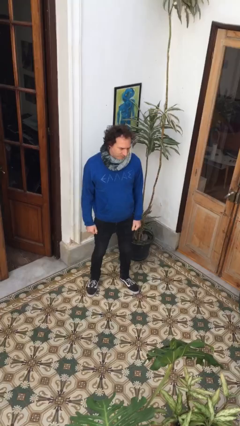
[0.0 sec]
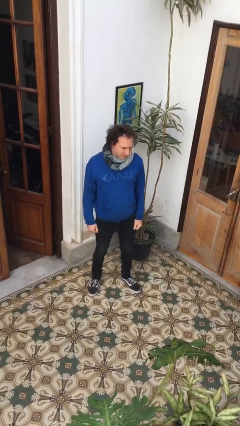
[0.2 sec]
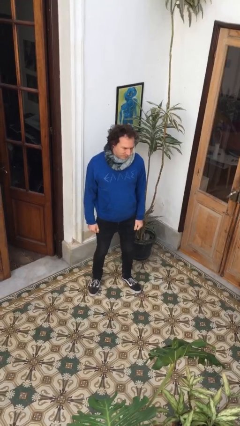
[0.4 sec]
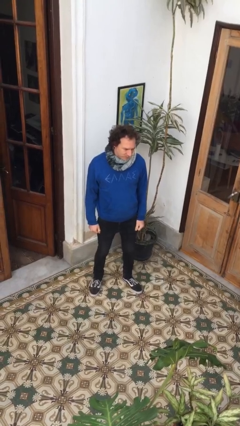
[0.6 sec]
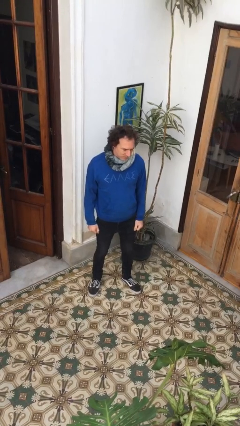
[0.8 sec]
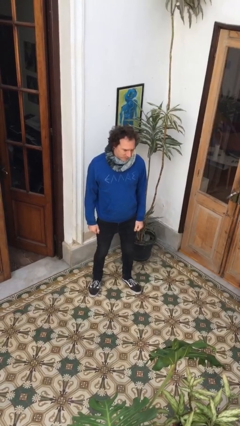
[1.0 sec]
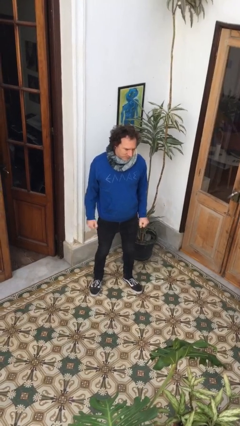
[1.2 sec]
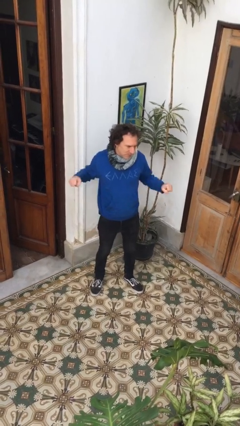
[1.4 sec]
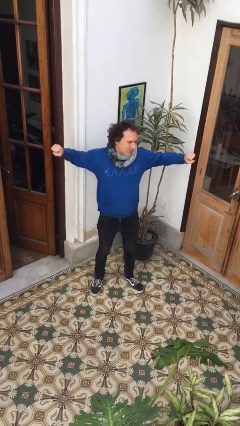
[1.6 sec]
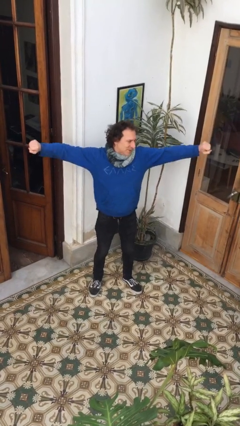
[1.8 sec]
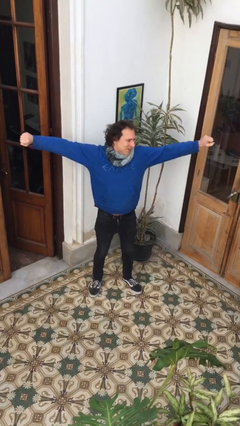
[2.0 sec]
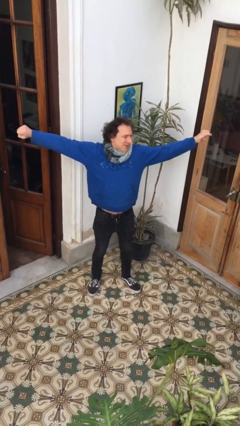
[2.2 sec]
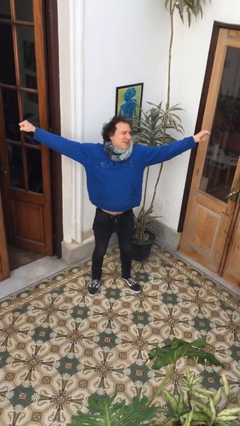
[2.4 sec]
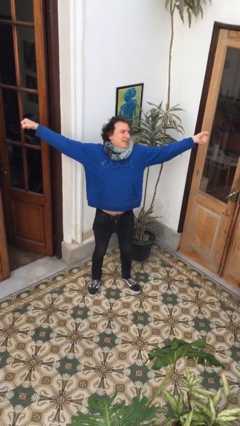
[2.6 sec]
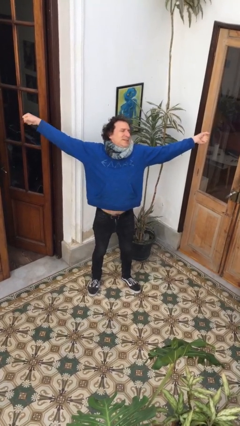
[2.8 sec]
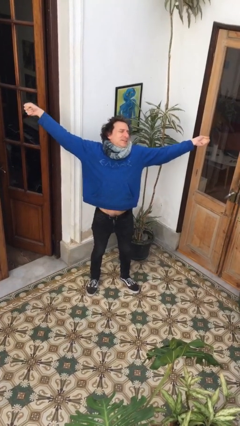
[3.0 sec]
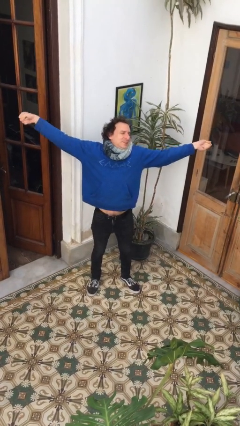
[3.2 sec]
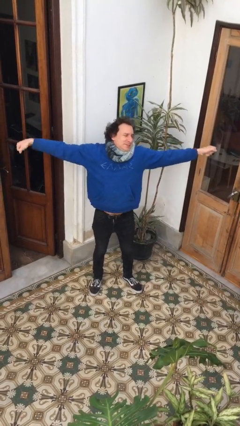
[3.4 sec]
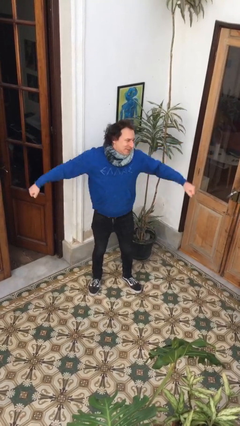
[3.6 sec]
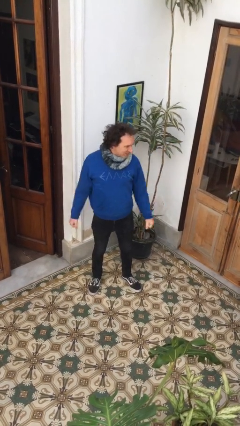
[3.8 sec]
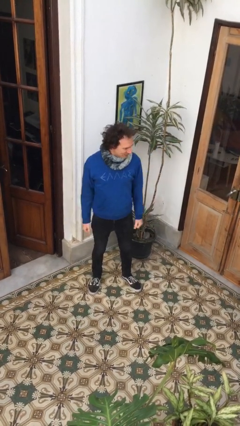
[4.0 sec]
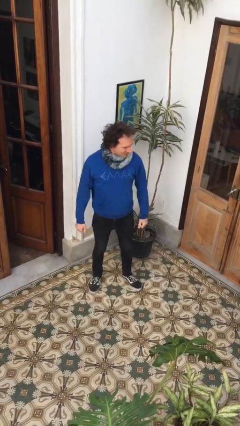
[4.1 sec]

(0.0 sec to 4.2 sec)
person stretches arms to side

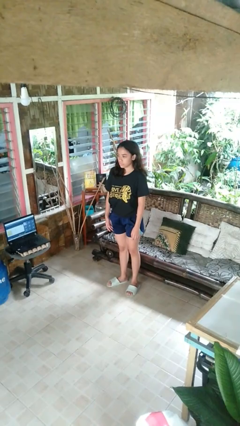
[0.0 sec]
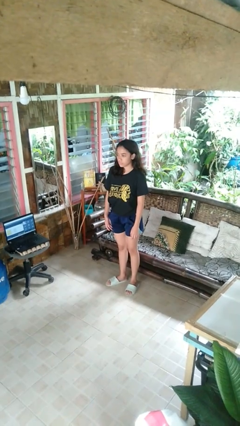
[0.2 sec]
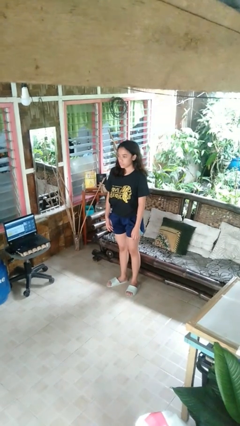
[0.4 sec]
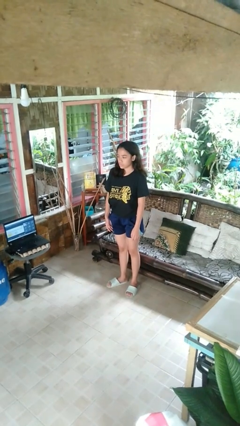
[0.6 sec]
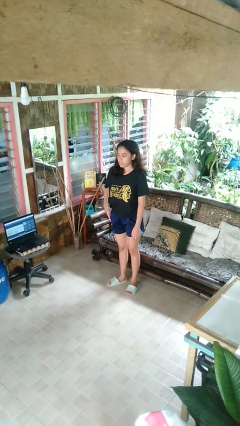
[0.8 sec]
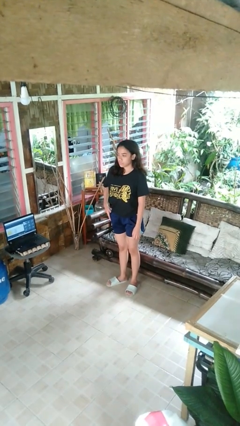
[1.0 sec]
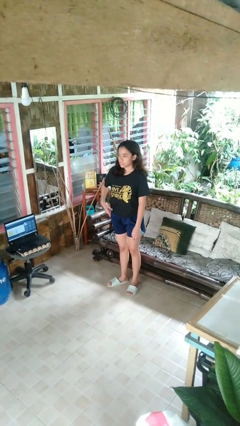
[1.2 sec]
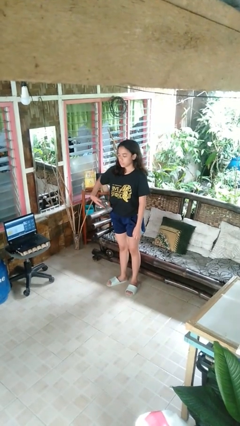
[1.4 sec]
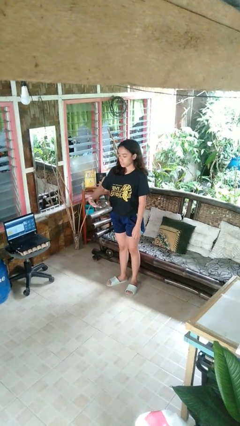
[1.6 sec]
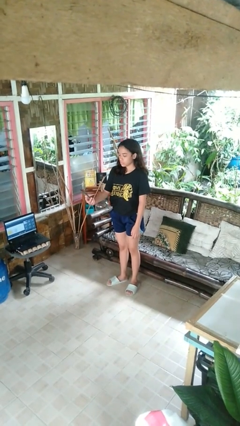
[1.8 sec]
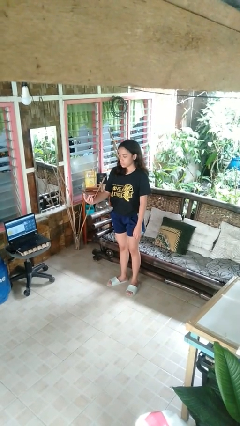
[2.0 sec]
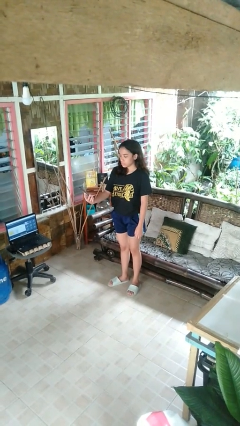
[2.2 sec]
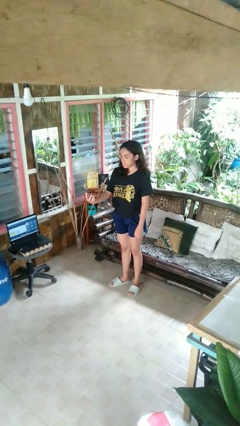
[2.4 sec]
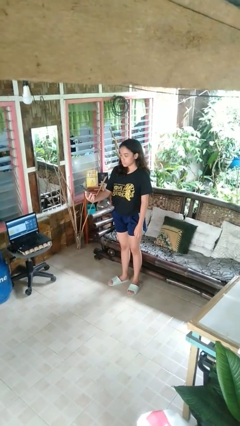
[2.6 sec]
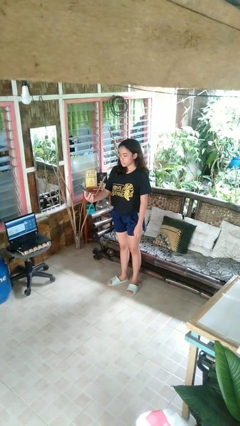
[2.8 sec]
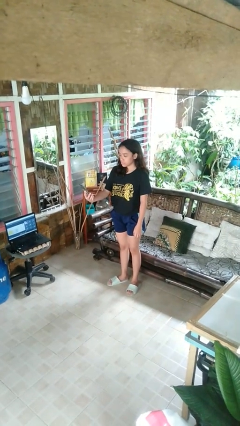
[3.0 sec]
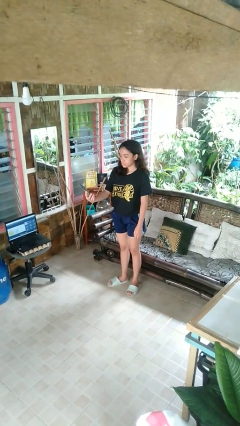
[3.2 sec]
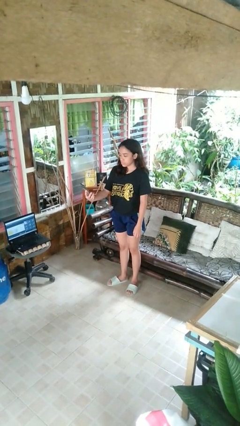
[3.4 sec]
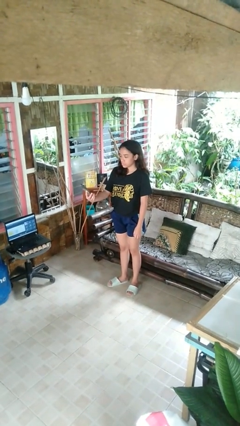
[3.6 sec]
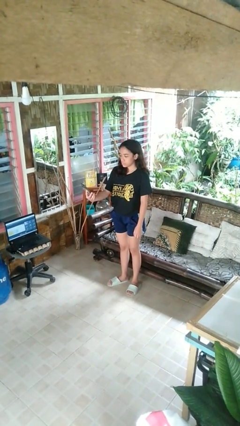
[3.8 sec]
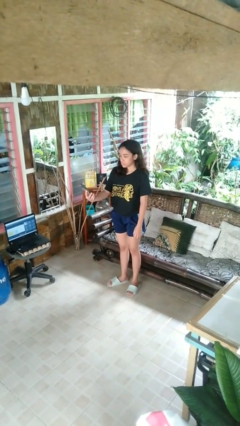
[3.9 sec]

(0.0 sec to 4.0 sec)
person takes phone from pocket

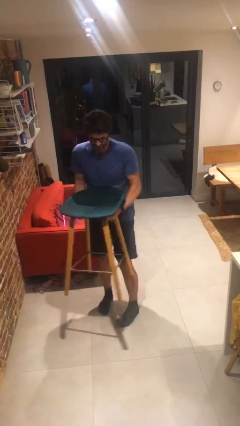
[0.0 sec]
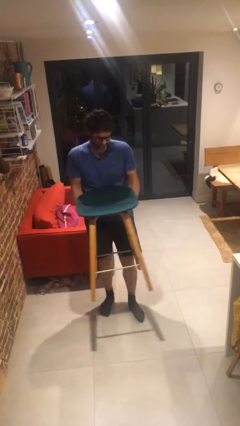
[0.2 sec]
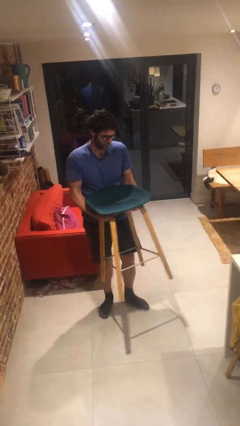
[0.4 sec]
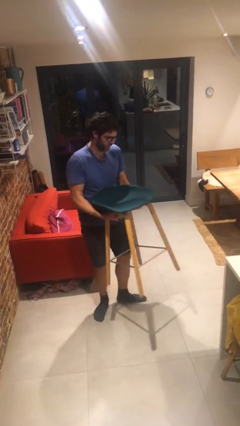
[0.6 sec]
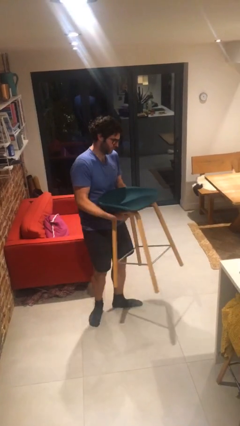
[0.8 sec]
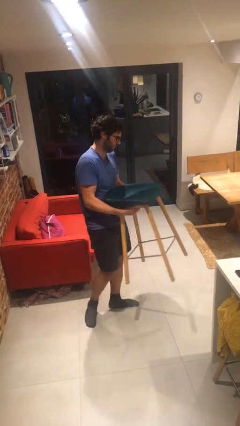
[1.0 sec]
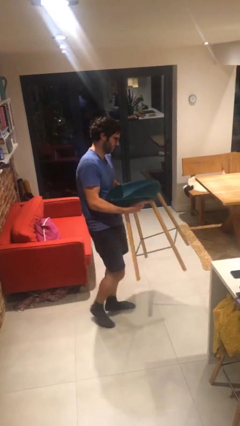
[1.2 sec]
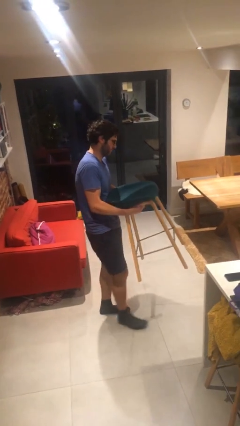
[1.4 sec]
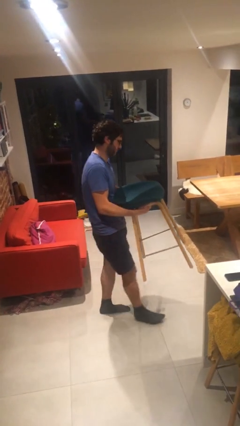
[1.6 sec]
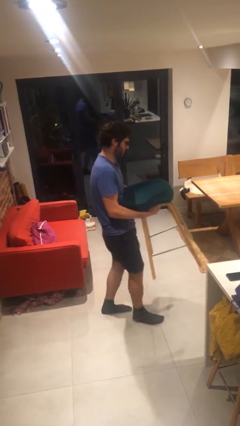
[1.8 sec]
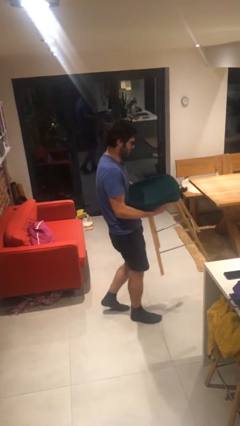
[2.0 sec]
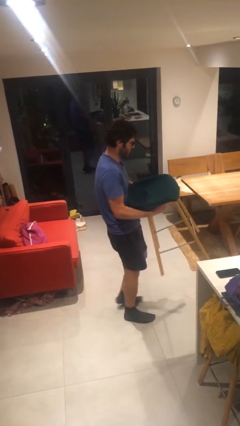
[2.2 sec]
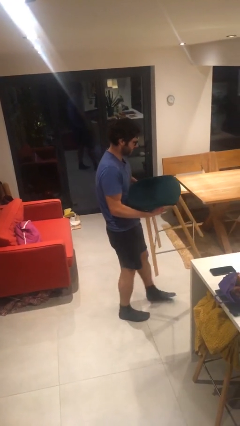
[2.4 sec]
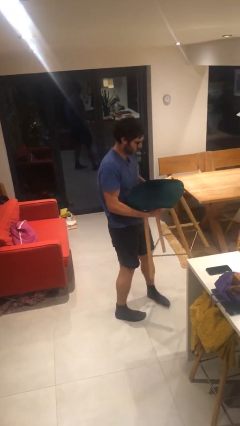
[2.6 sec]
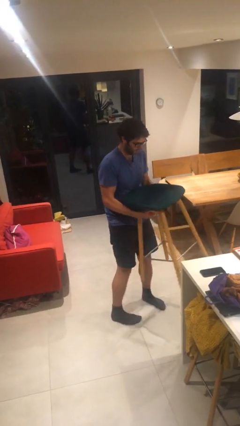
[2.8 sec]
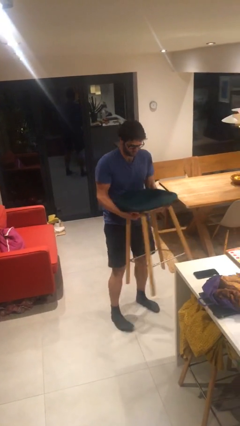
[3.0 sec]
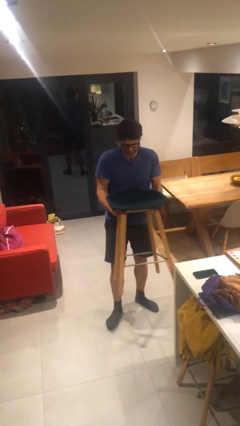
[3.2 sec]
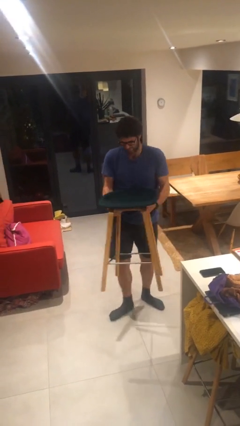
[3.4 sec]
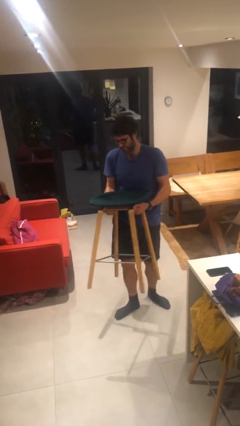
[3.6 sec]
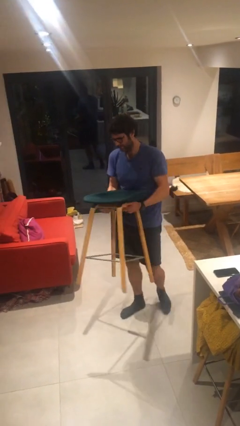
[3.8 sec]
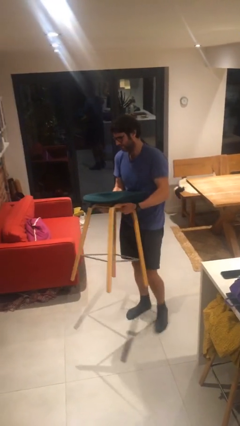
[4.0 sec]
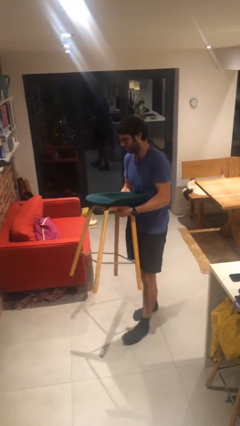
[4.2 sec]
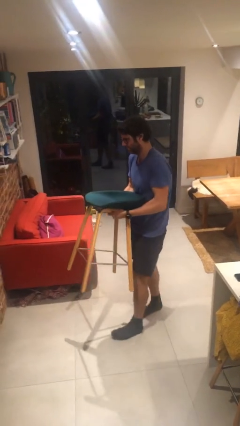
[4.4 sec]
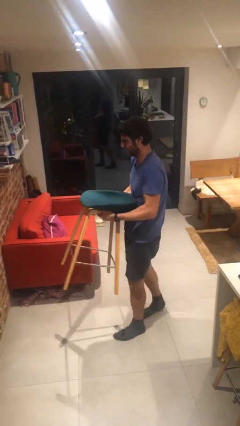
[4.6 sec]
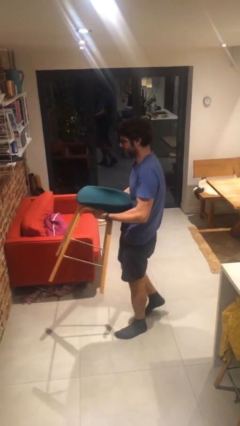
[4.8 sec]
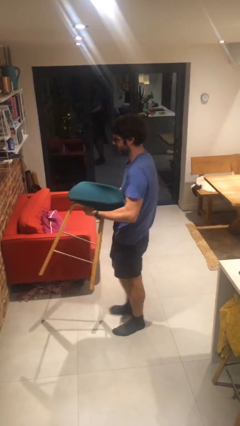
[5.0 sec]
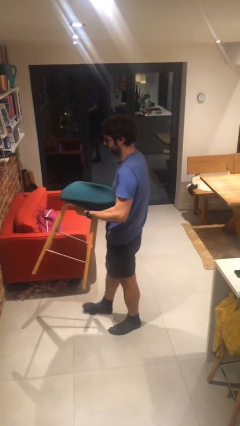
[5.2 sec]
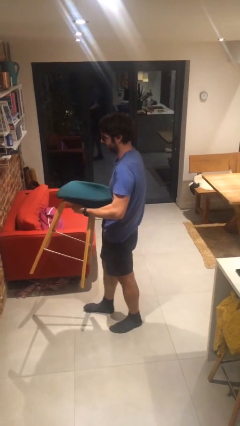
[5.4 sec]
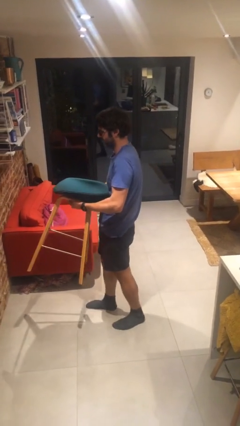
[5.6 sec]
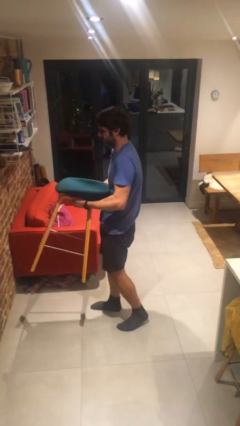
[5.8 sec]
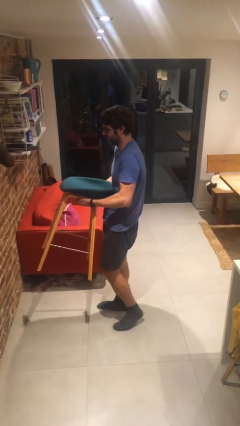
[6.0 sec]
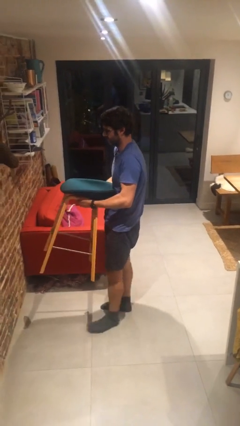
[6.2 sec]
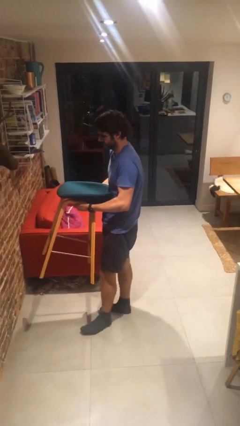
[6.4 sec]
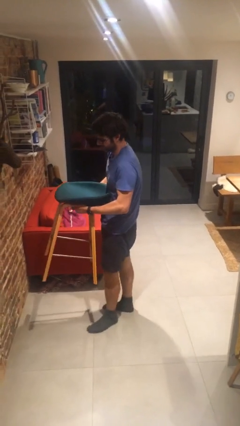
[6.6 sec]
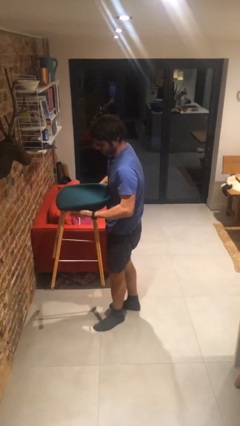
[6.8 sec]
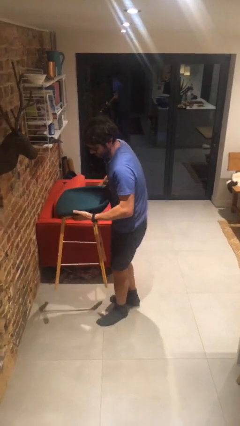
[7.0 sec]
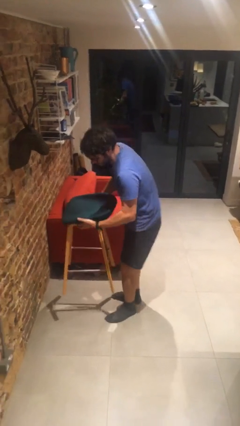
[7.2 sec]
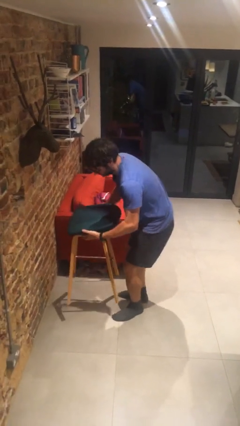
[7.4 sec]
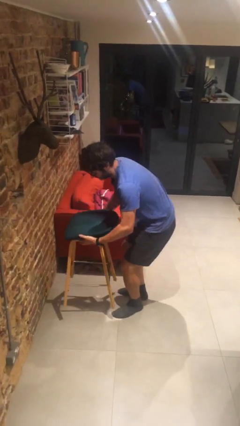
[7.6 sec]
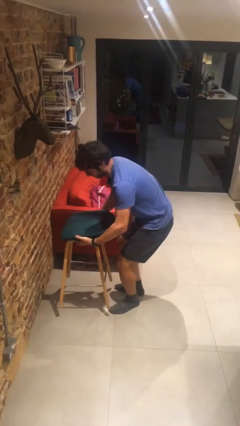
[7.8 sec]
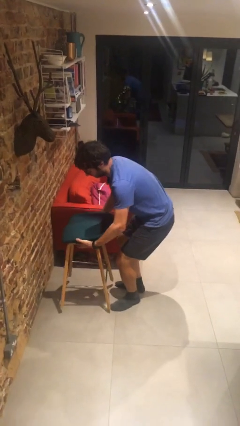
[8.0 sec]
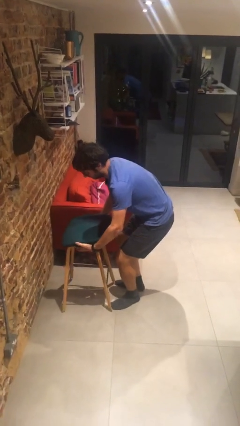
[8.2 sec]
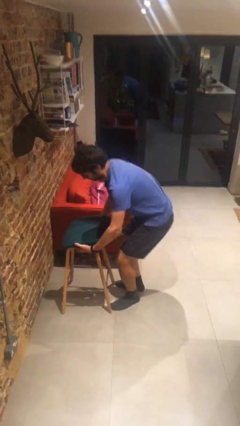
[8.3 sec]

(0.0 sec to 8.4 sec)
person carries heavy object
